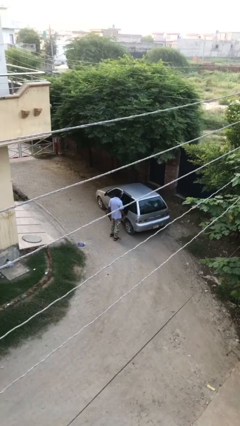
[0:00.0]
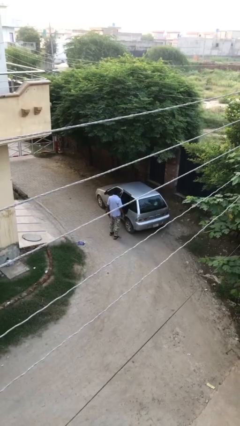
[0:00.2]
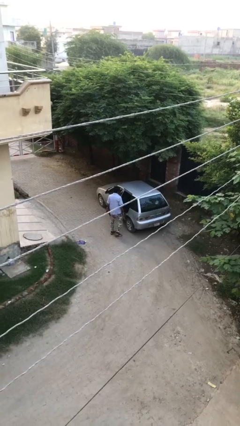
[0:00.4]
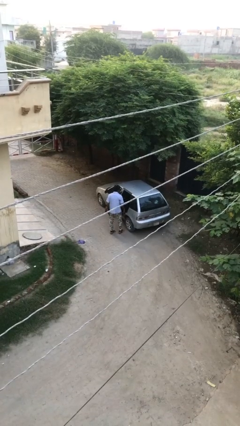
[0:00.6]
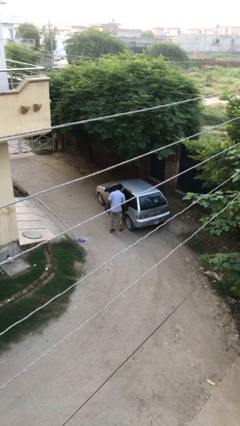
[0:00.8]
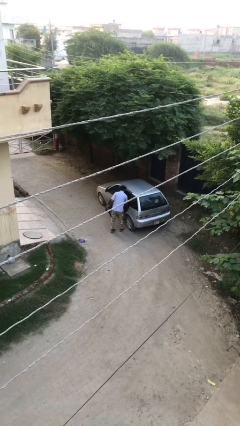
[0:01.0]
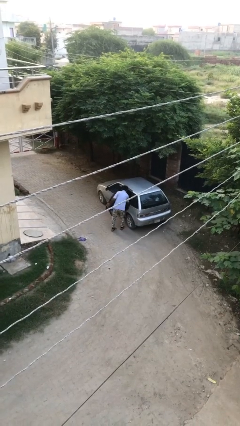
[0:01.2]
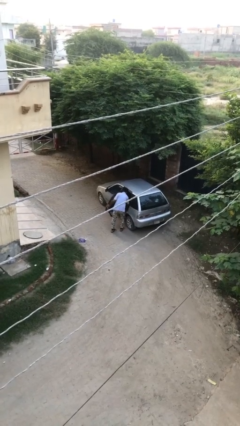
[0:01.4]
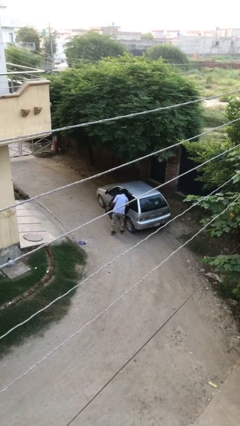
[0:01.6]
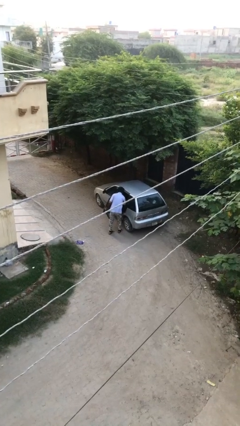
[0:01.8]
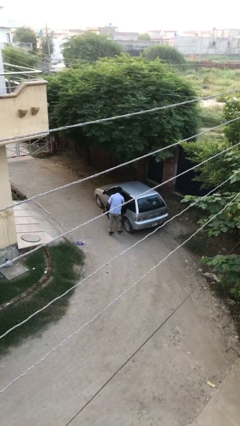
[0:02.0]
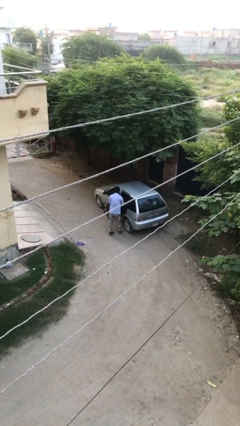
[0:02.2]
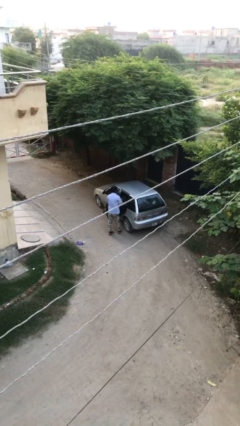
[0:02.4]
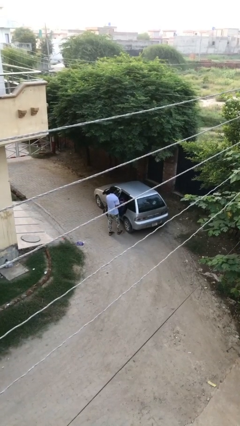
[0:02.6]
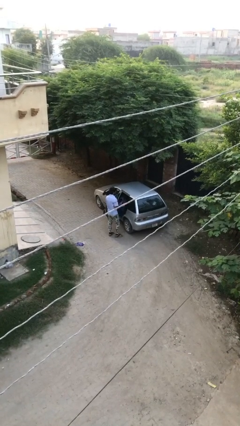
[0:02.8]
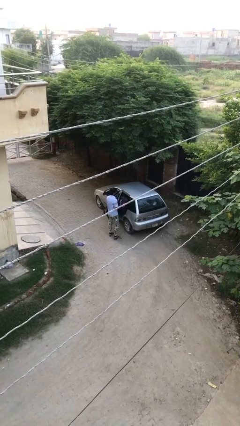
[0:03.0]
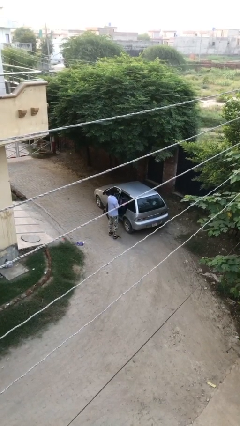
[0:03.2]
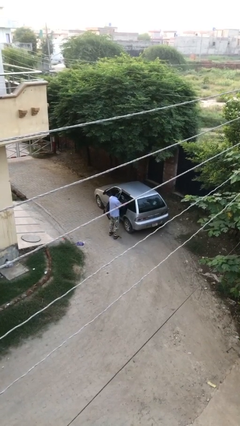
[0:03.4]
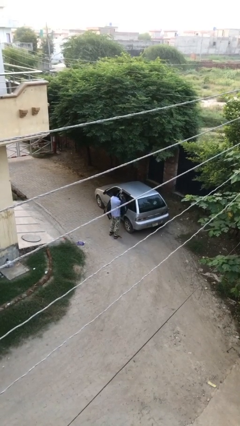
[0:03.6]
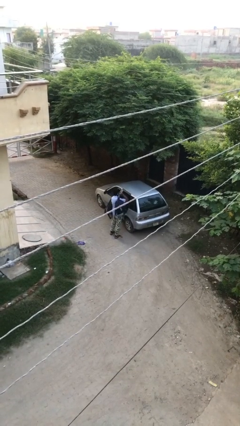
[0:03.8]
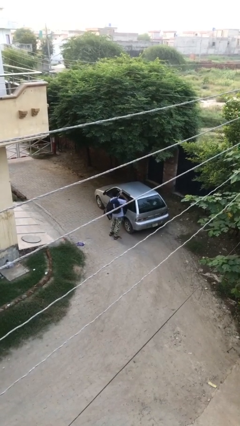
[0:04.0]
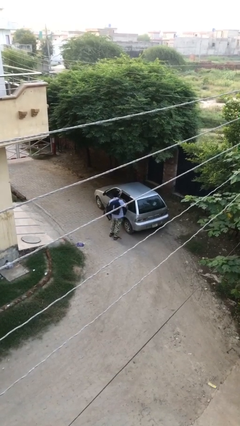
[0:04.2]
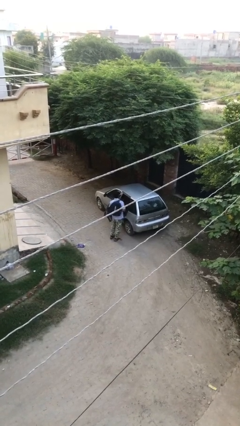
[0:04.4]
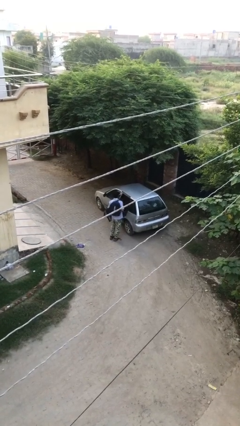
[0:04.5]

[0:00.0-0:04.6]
person unloads car

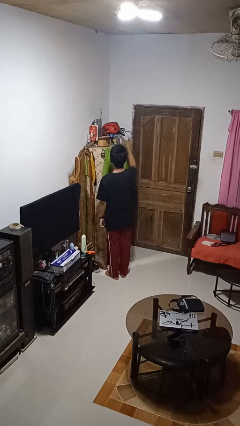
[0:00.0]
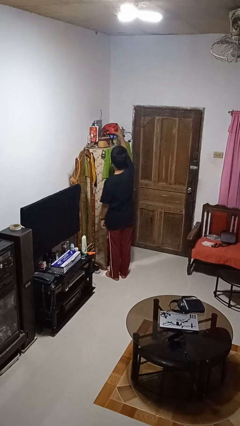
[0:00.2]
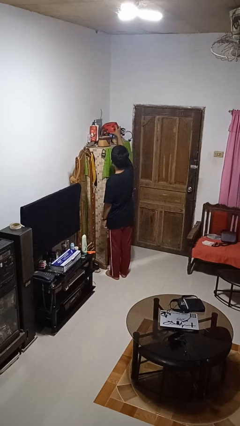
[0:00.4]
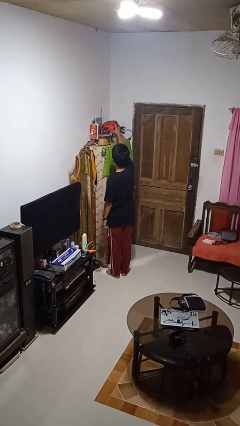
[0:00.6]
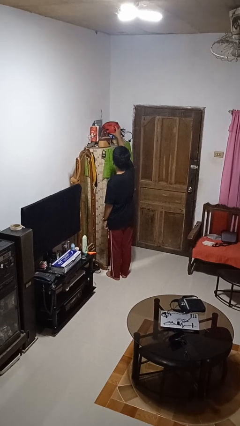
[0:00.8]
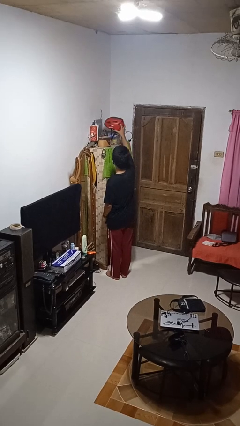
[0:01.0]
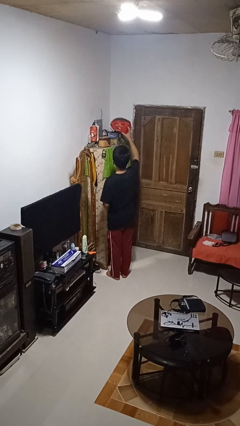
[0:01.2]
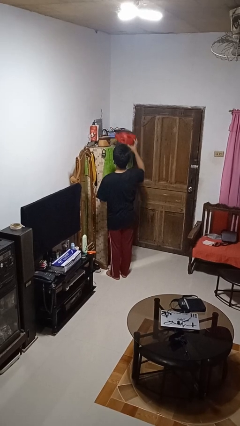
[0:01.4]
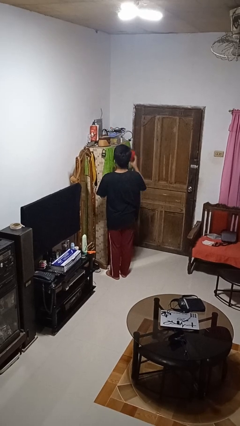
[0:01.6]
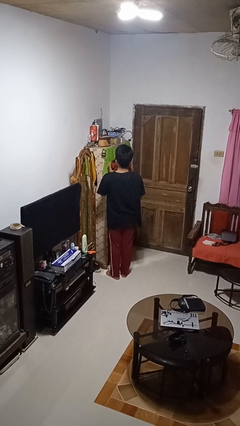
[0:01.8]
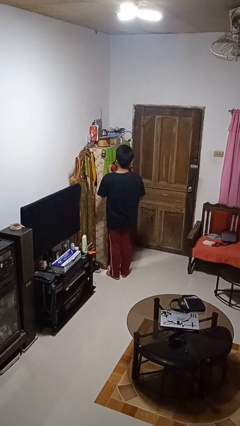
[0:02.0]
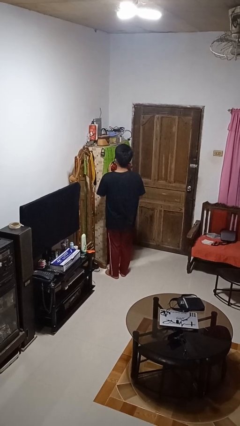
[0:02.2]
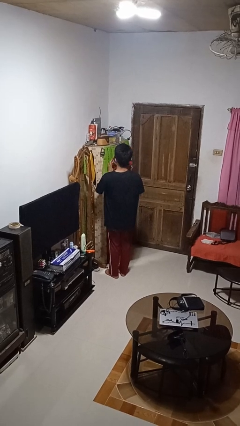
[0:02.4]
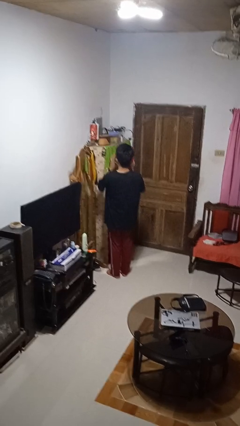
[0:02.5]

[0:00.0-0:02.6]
person picks up object from shelf

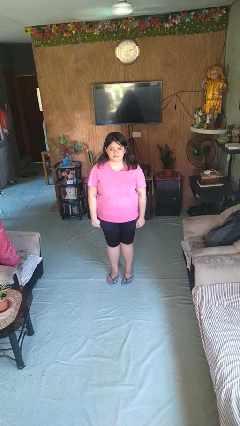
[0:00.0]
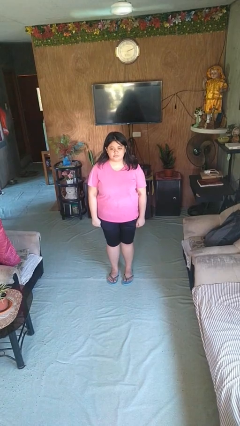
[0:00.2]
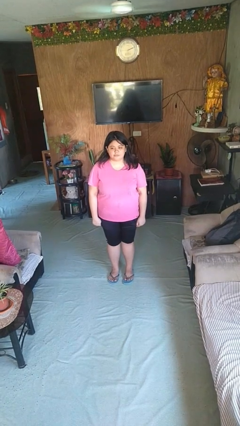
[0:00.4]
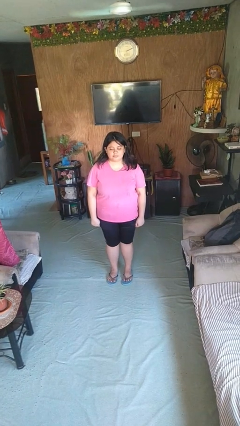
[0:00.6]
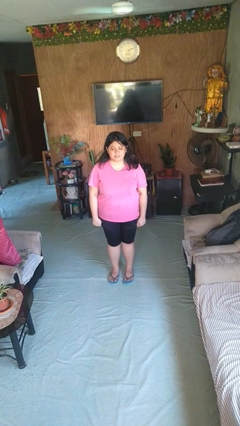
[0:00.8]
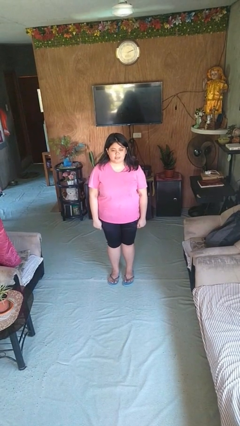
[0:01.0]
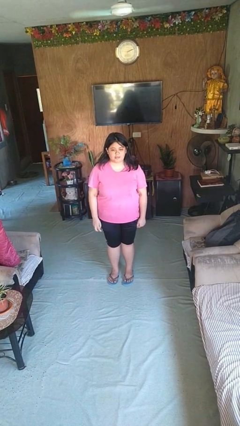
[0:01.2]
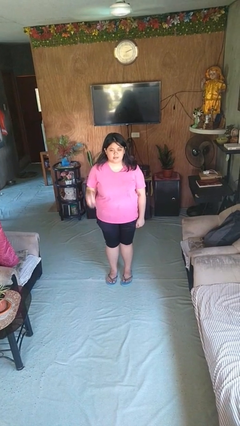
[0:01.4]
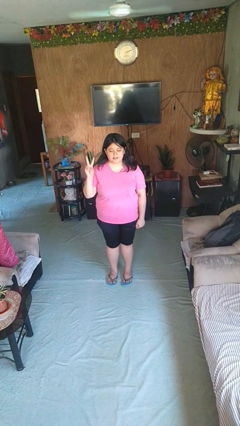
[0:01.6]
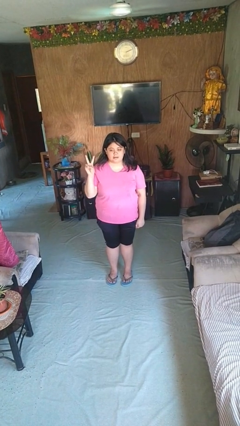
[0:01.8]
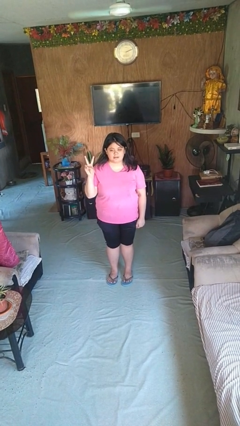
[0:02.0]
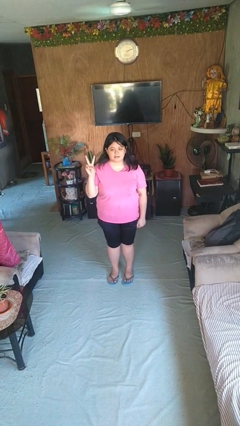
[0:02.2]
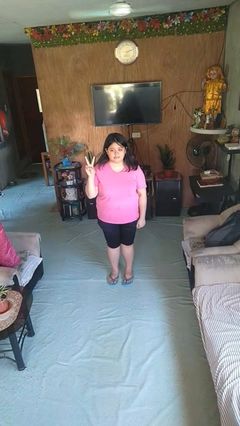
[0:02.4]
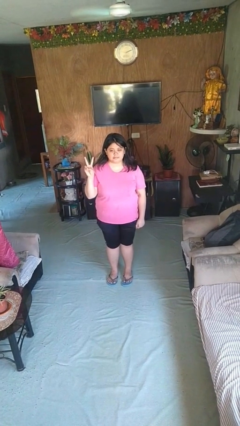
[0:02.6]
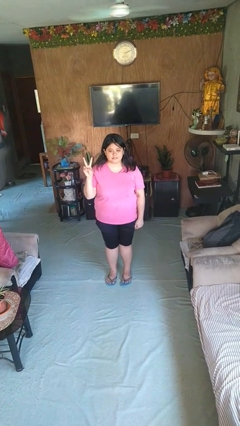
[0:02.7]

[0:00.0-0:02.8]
person gestures peace

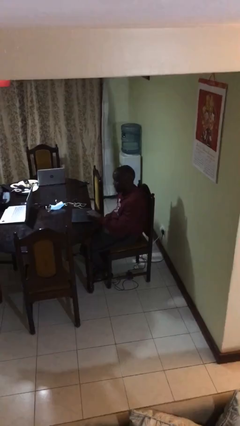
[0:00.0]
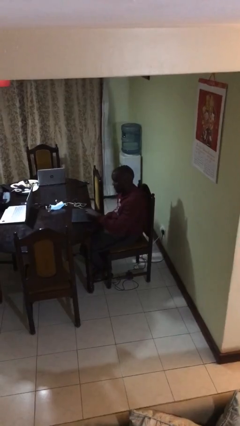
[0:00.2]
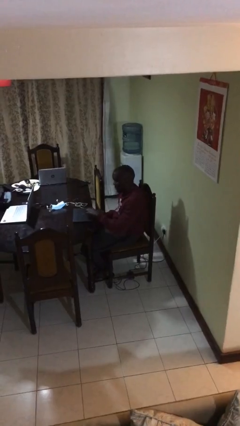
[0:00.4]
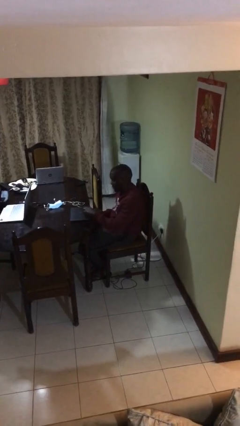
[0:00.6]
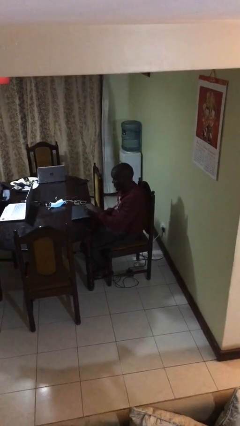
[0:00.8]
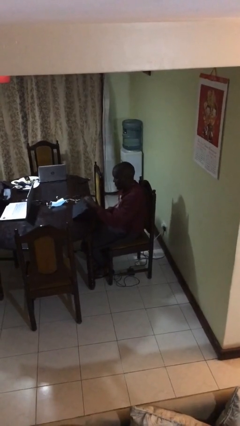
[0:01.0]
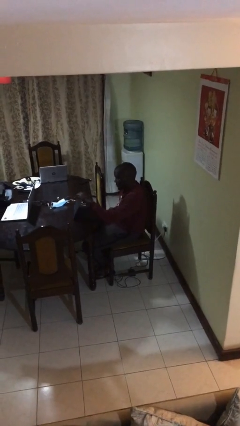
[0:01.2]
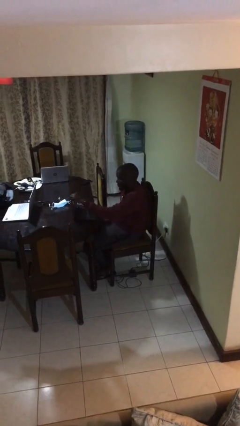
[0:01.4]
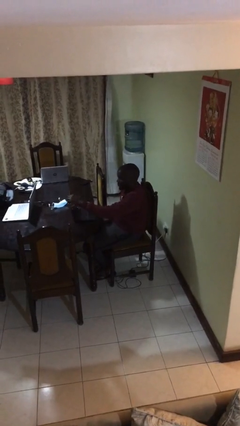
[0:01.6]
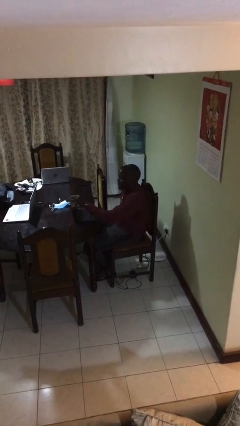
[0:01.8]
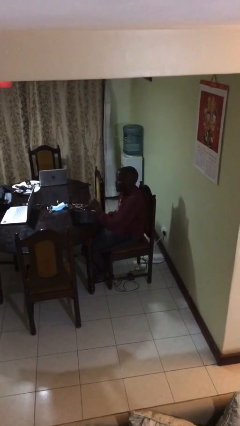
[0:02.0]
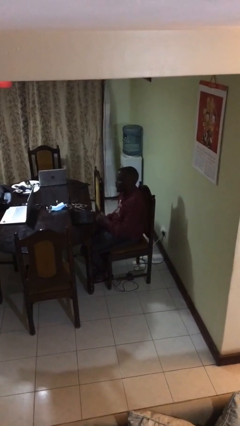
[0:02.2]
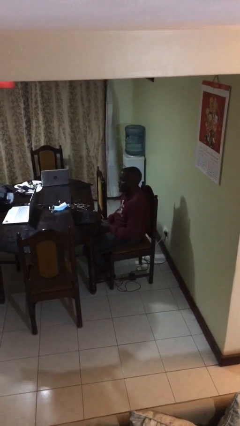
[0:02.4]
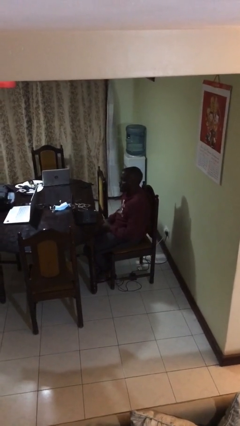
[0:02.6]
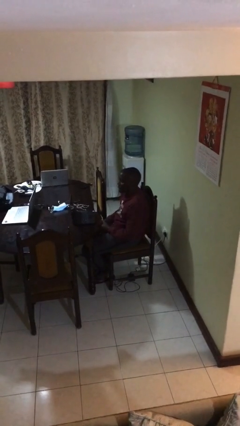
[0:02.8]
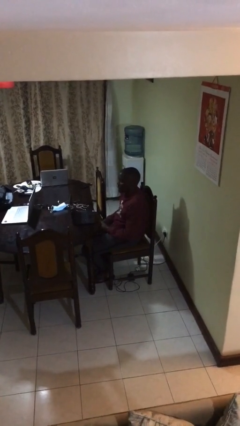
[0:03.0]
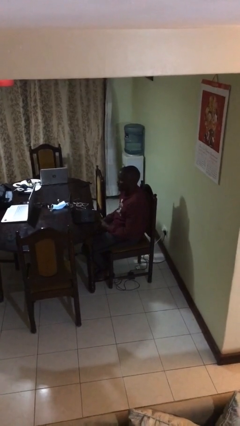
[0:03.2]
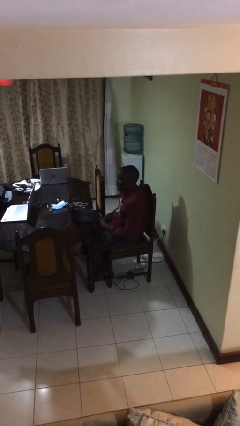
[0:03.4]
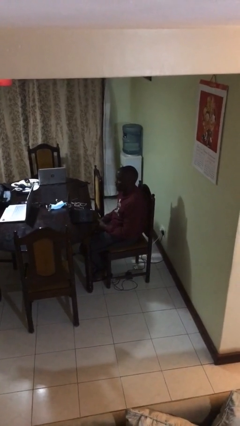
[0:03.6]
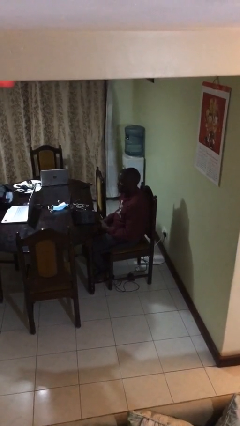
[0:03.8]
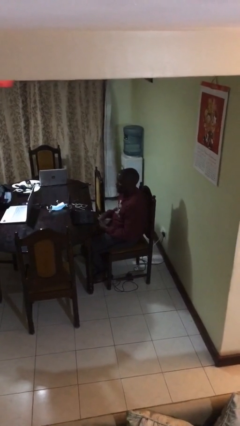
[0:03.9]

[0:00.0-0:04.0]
person opens laptop

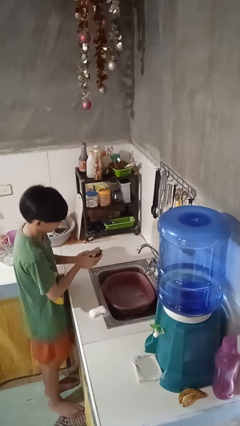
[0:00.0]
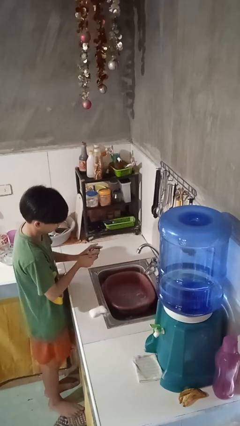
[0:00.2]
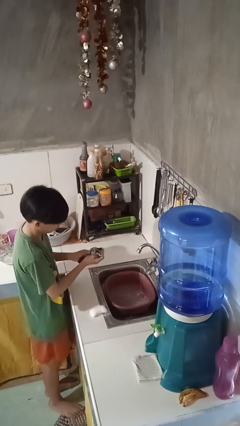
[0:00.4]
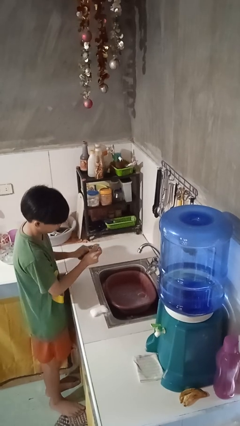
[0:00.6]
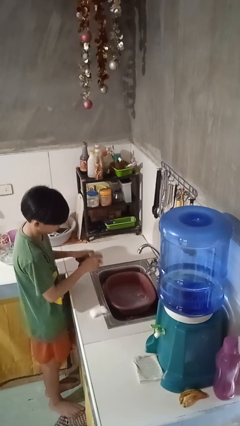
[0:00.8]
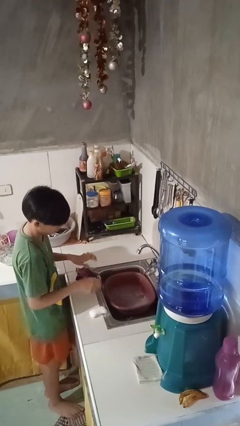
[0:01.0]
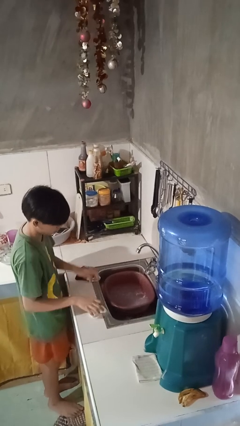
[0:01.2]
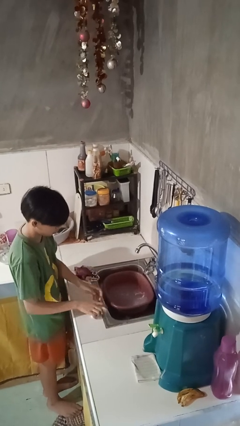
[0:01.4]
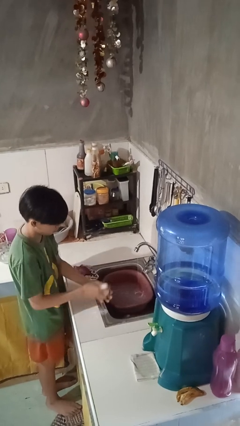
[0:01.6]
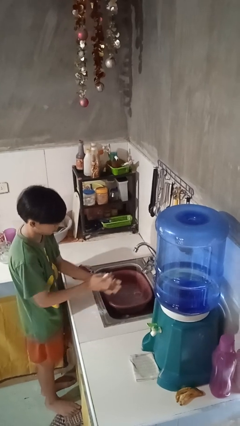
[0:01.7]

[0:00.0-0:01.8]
person washes hands

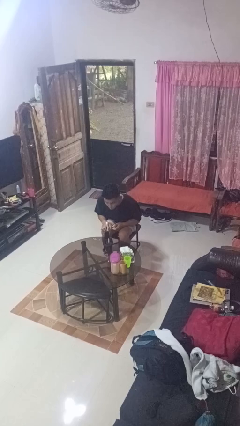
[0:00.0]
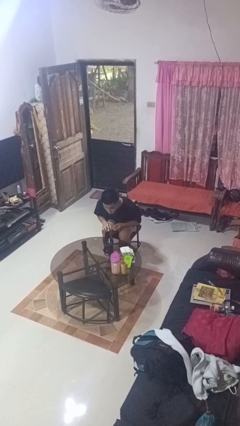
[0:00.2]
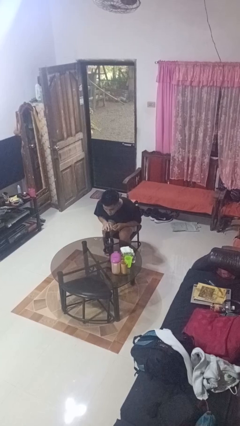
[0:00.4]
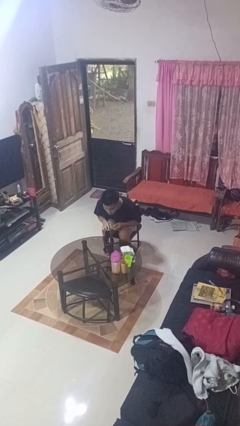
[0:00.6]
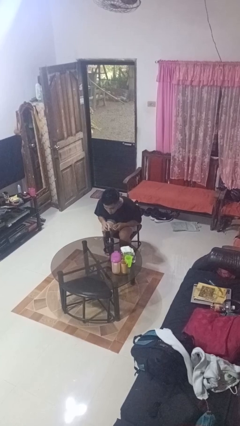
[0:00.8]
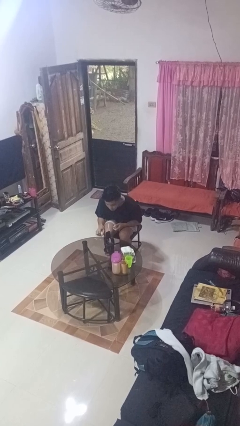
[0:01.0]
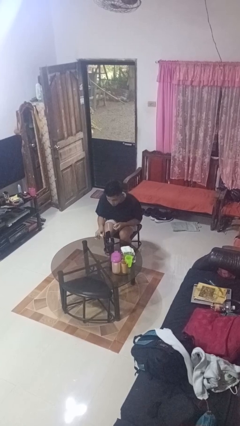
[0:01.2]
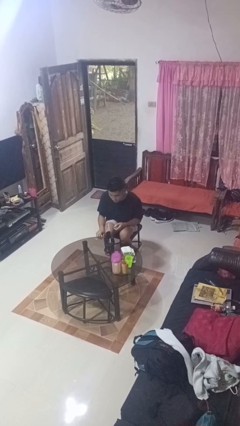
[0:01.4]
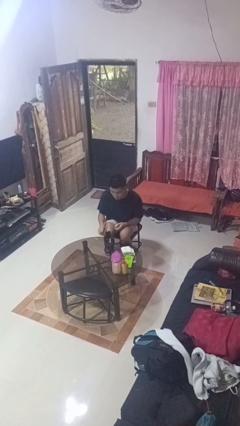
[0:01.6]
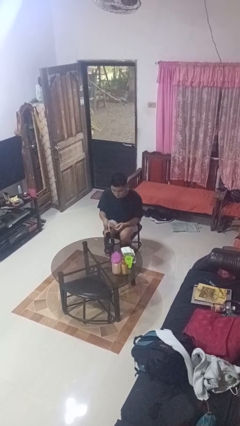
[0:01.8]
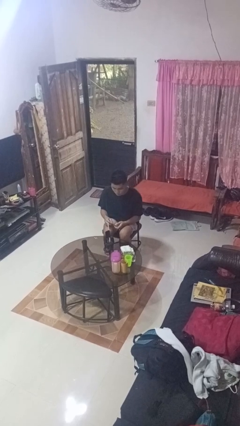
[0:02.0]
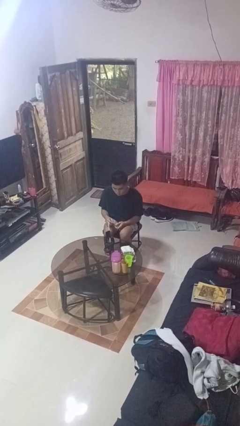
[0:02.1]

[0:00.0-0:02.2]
person extinguishes candle
